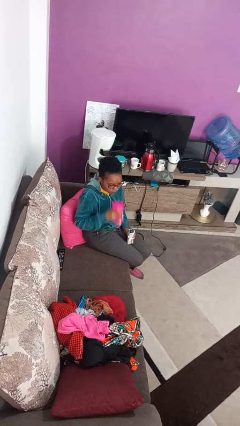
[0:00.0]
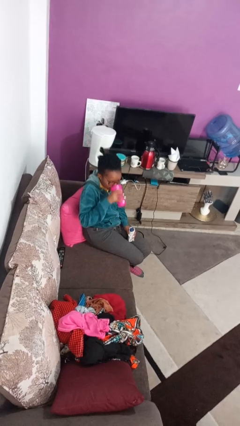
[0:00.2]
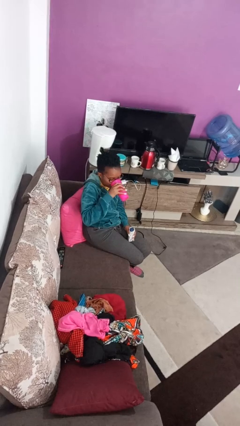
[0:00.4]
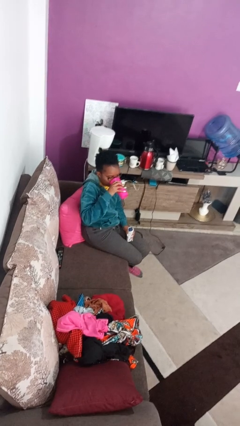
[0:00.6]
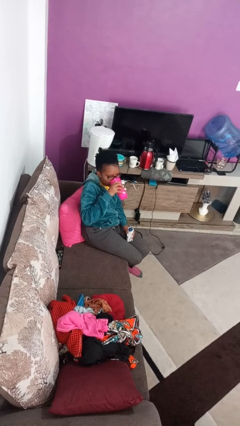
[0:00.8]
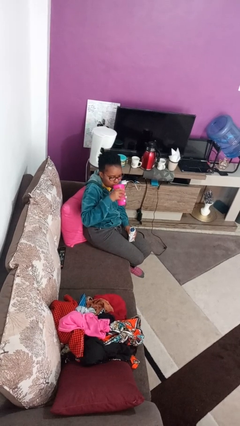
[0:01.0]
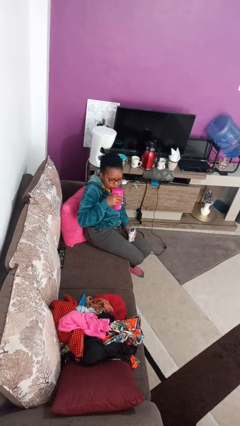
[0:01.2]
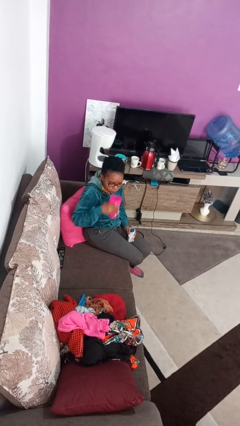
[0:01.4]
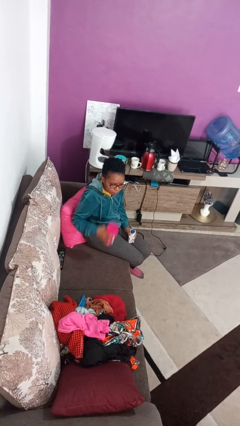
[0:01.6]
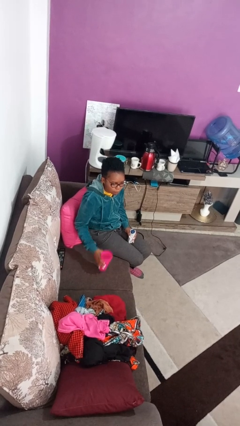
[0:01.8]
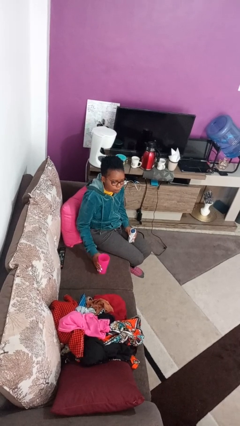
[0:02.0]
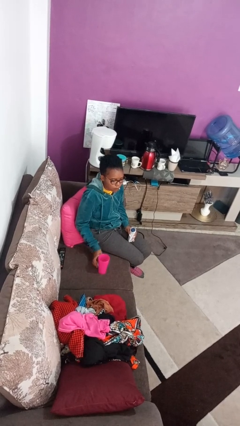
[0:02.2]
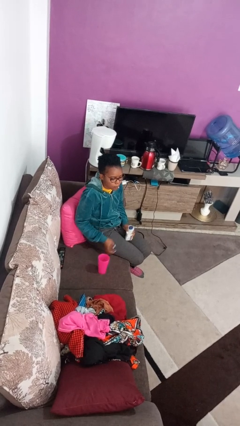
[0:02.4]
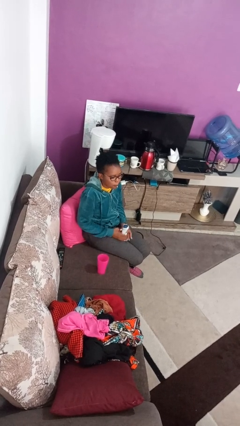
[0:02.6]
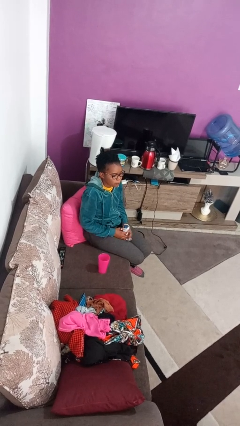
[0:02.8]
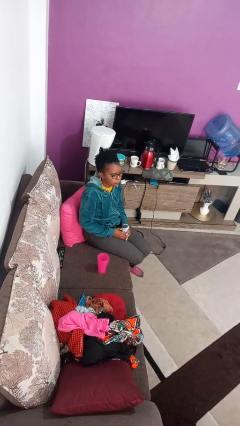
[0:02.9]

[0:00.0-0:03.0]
person drinks from cup

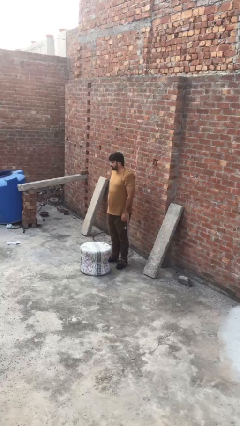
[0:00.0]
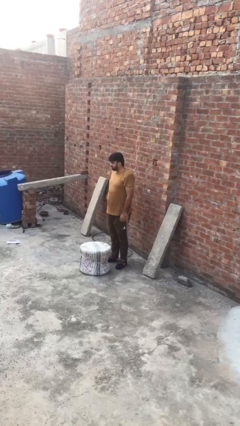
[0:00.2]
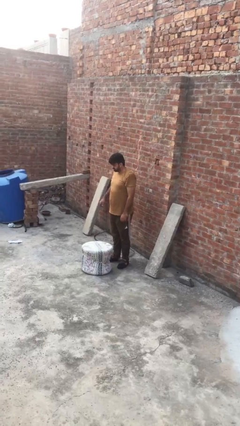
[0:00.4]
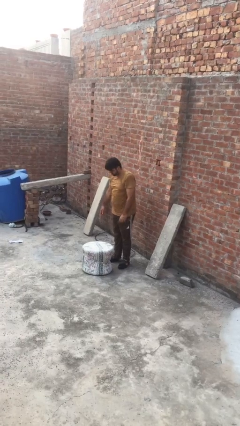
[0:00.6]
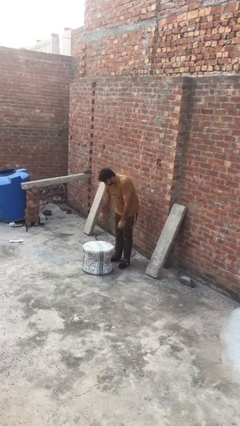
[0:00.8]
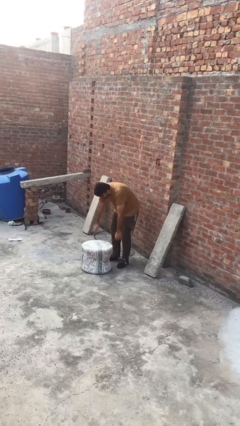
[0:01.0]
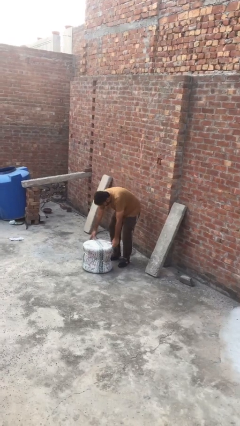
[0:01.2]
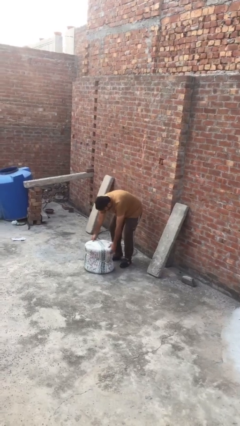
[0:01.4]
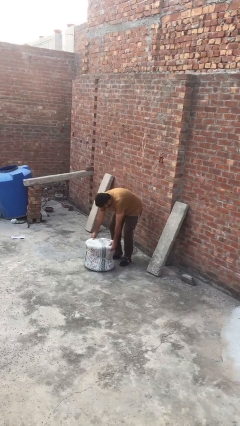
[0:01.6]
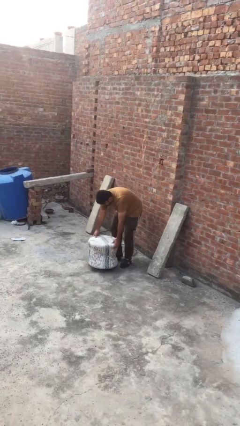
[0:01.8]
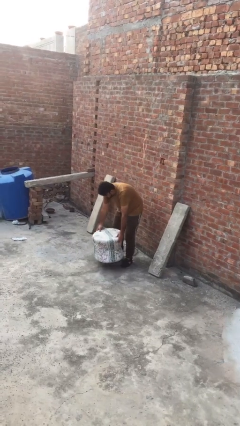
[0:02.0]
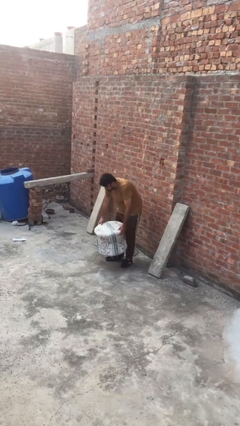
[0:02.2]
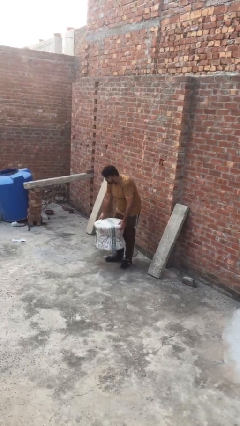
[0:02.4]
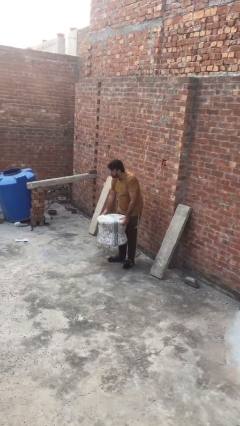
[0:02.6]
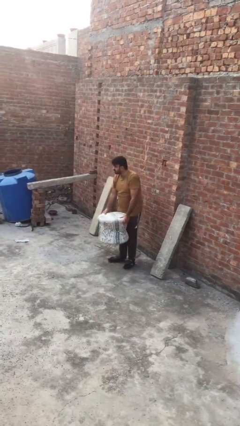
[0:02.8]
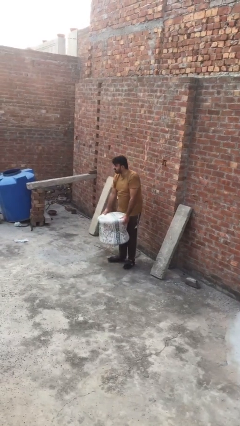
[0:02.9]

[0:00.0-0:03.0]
person picks up object from floor

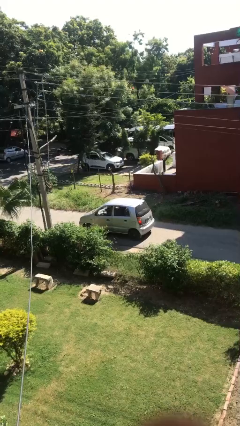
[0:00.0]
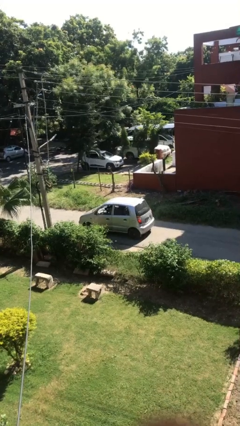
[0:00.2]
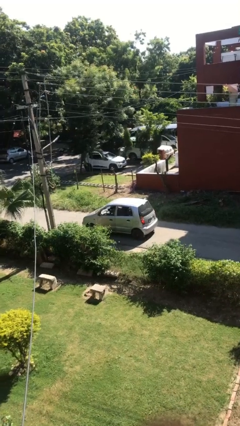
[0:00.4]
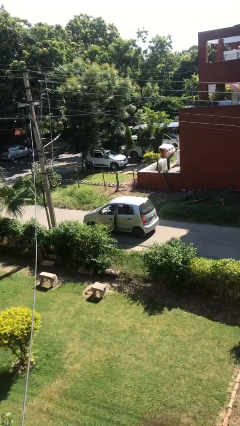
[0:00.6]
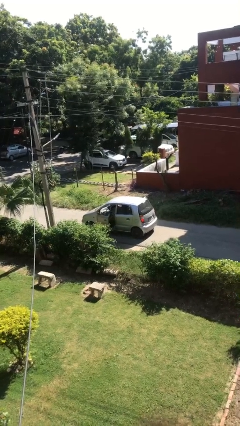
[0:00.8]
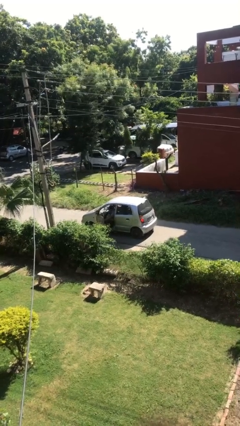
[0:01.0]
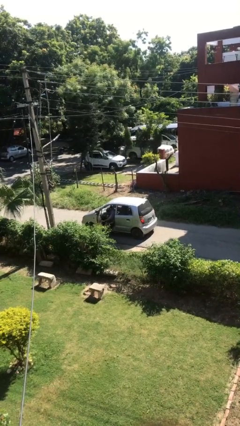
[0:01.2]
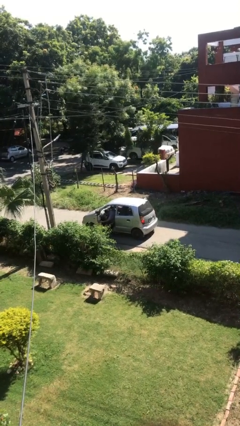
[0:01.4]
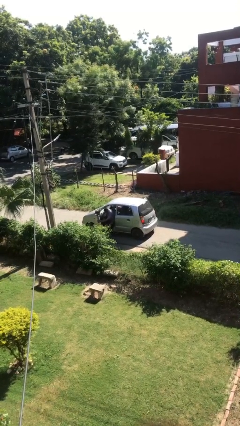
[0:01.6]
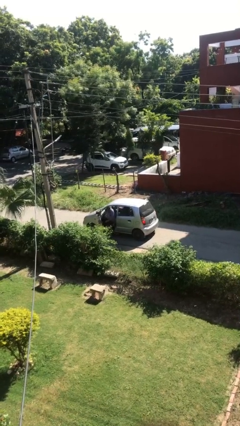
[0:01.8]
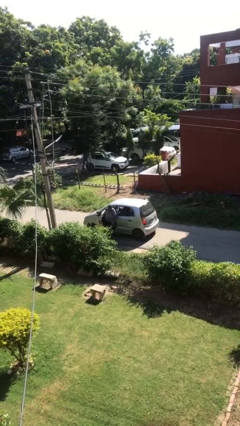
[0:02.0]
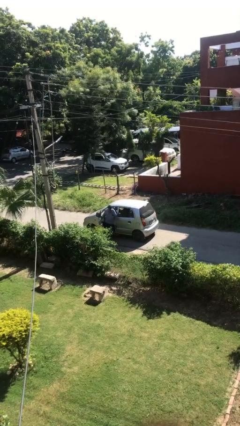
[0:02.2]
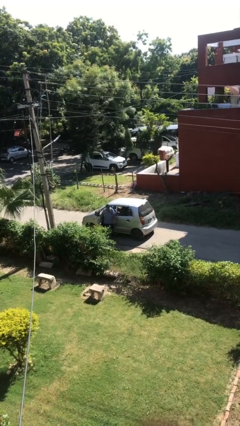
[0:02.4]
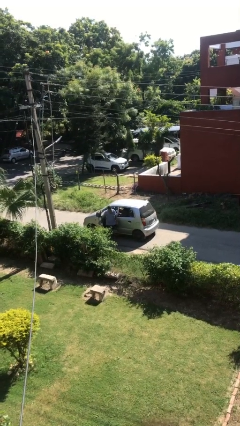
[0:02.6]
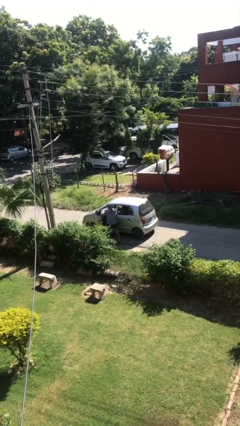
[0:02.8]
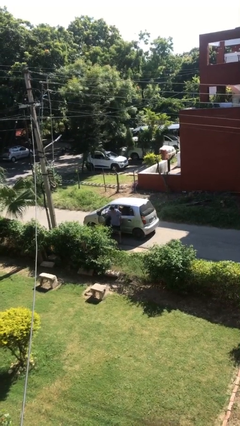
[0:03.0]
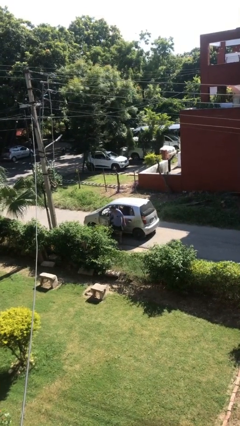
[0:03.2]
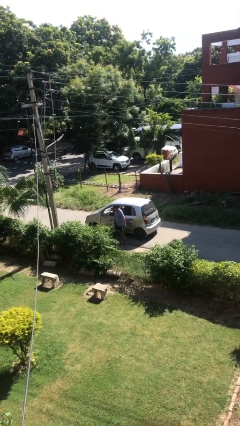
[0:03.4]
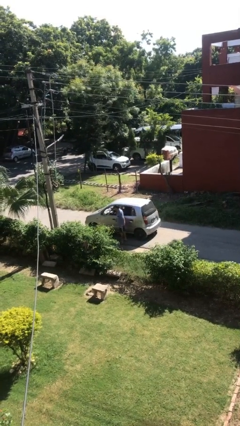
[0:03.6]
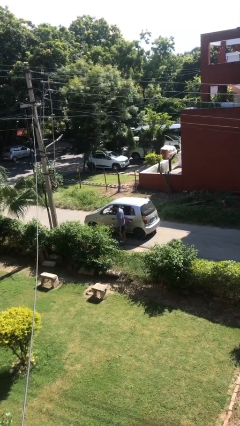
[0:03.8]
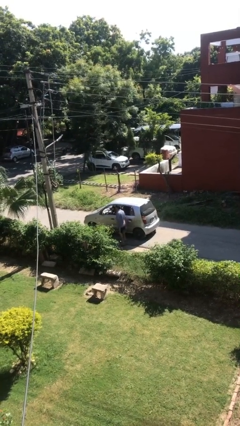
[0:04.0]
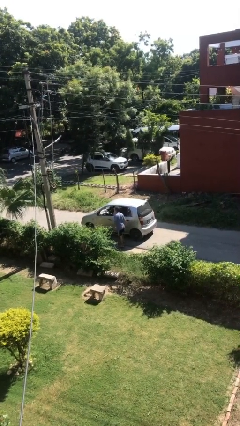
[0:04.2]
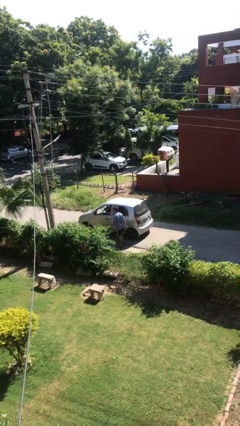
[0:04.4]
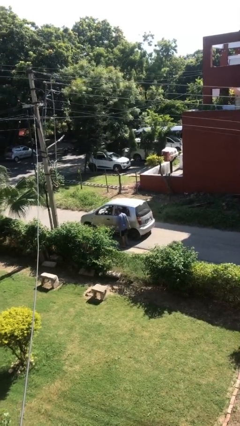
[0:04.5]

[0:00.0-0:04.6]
car drops off person

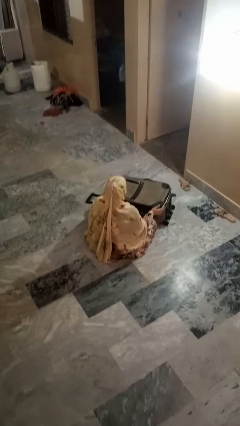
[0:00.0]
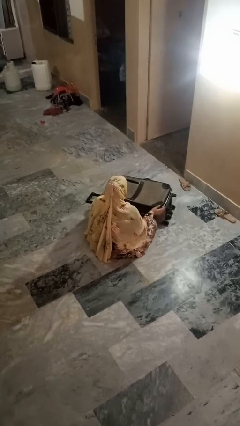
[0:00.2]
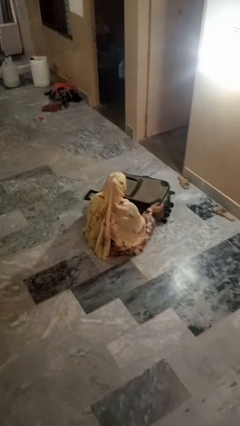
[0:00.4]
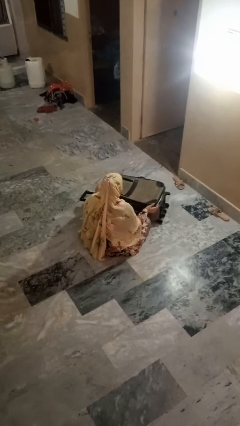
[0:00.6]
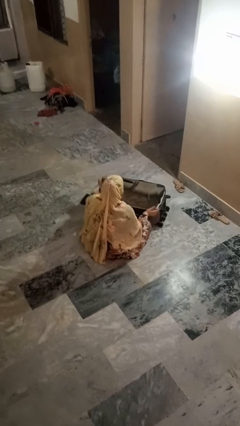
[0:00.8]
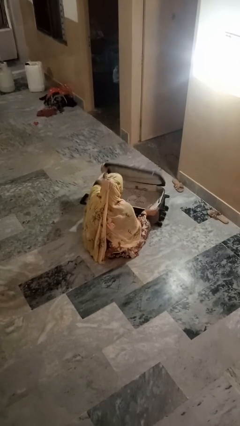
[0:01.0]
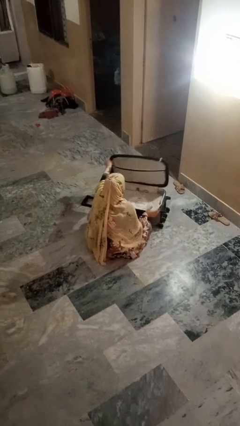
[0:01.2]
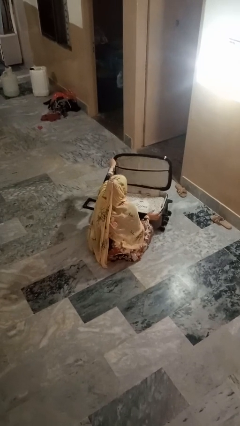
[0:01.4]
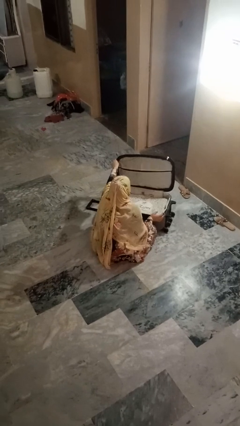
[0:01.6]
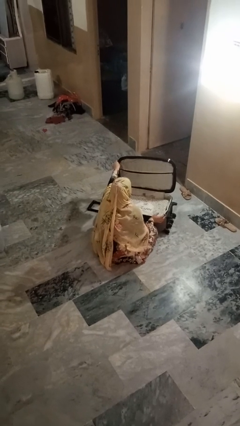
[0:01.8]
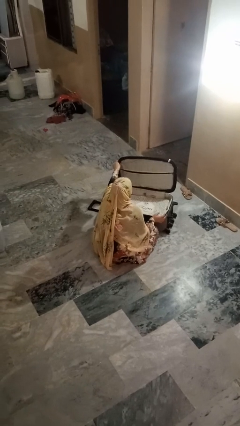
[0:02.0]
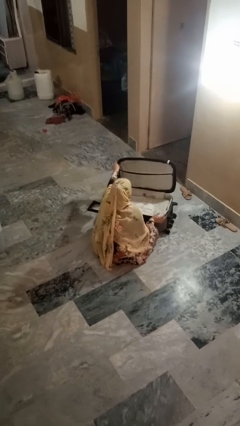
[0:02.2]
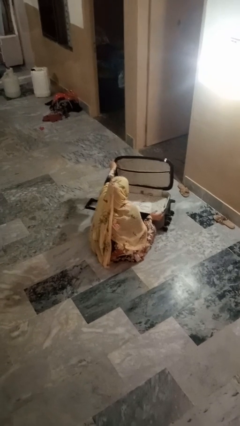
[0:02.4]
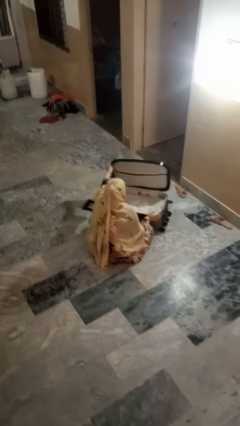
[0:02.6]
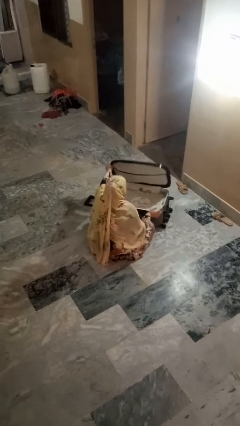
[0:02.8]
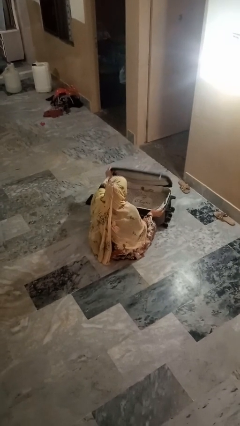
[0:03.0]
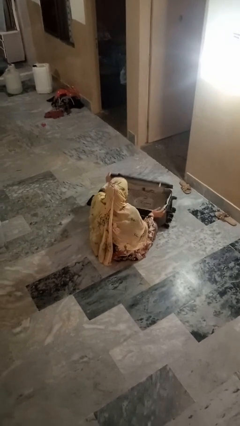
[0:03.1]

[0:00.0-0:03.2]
person opens suitcase

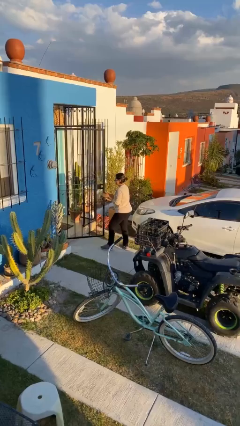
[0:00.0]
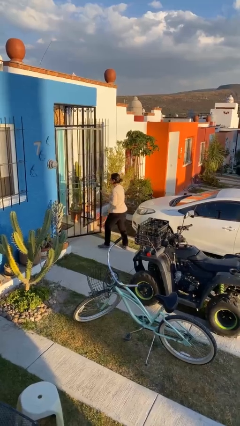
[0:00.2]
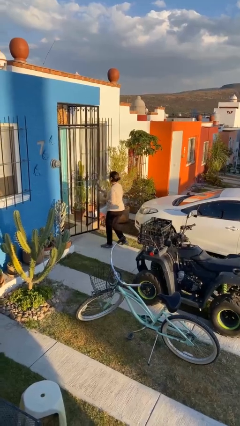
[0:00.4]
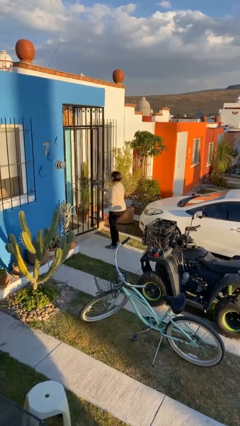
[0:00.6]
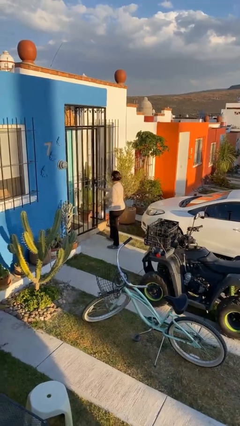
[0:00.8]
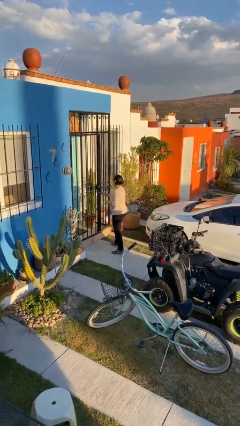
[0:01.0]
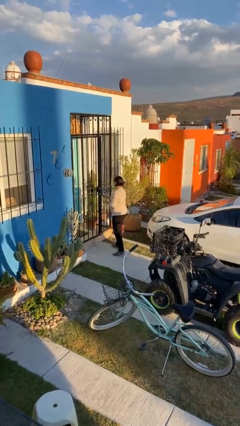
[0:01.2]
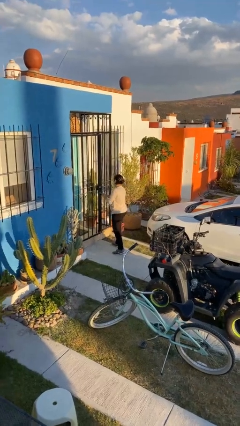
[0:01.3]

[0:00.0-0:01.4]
person closes facility door

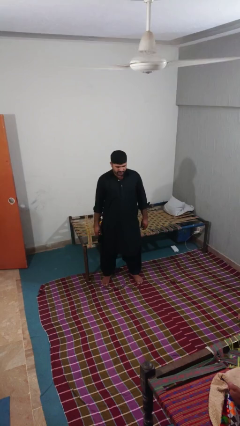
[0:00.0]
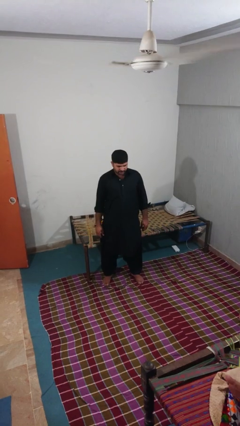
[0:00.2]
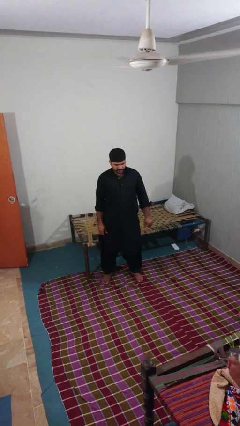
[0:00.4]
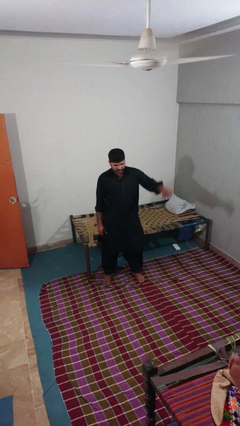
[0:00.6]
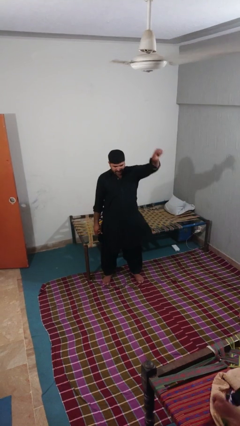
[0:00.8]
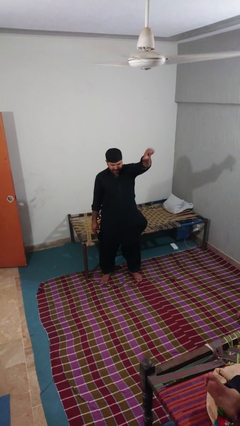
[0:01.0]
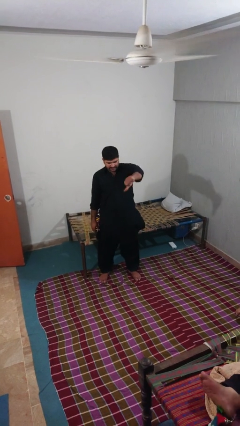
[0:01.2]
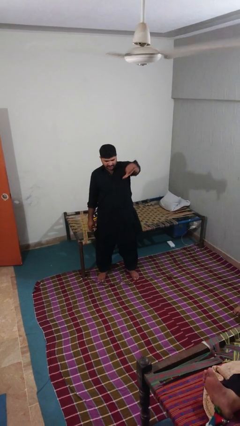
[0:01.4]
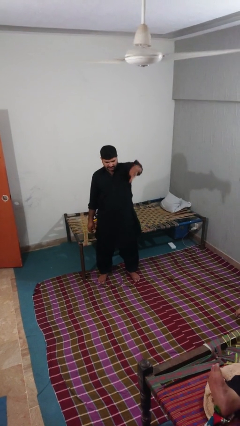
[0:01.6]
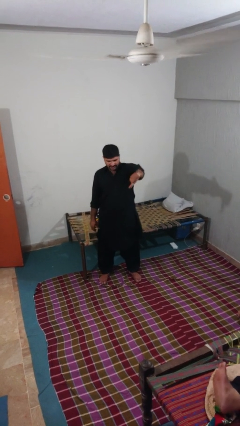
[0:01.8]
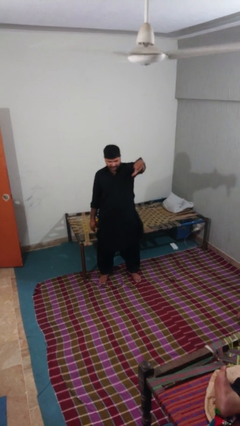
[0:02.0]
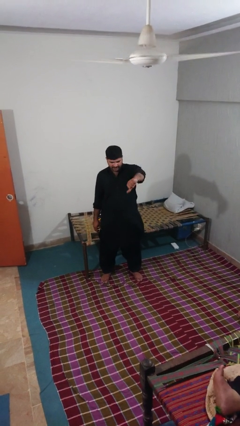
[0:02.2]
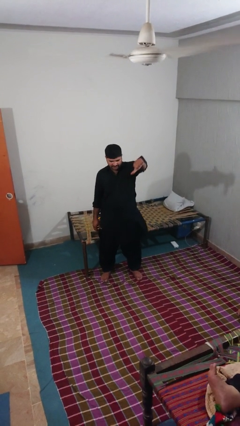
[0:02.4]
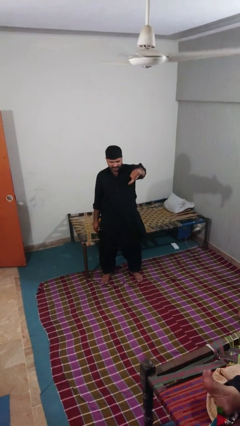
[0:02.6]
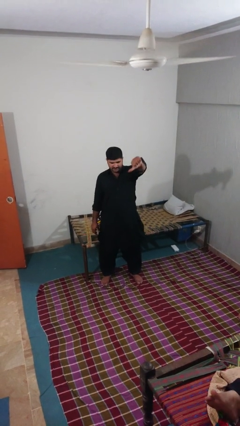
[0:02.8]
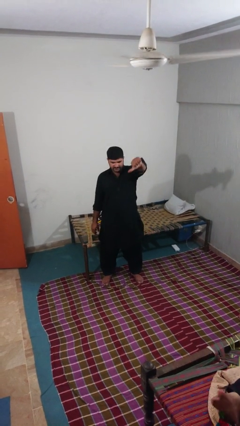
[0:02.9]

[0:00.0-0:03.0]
person gestures thumbs down
